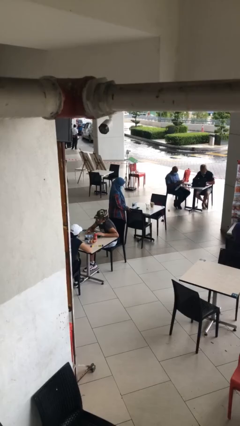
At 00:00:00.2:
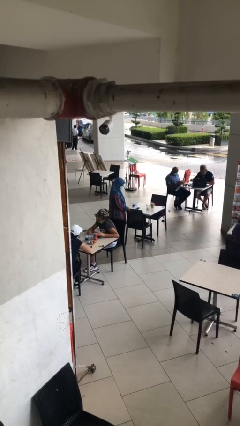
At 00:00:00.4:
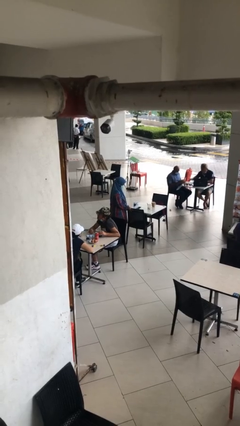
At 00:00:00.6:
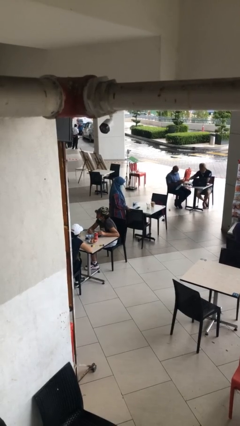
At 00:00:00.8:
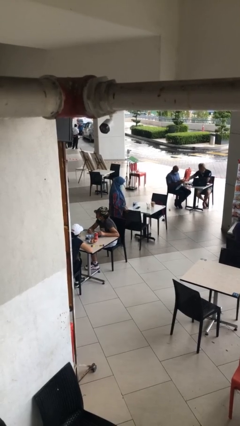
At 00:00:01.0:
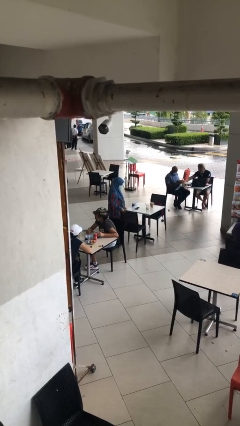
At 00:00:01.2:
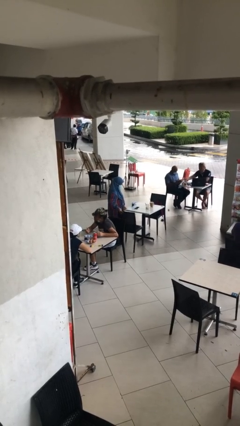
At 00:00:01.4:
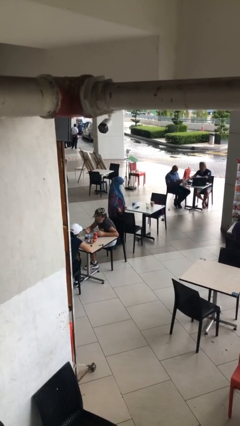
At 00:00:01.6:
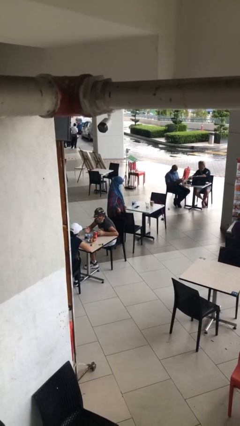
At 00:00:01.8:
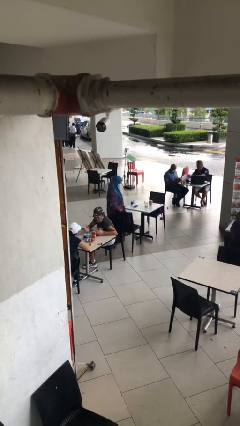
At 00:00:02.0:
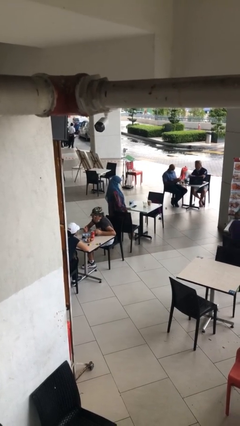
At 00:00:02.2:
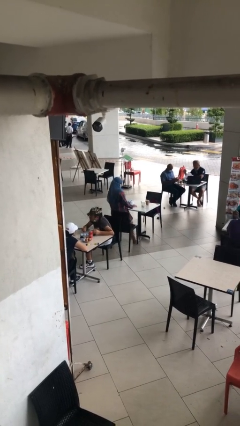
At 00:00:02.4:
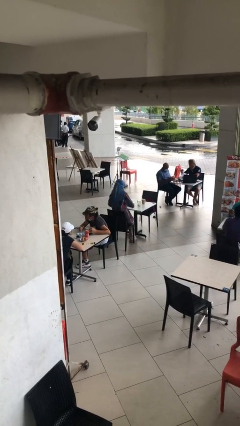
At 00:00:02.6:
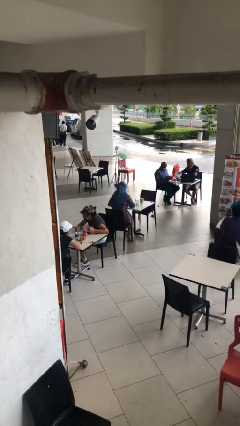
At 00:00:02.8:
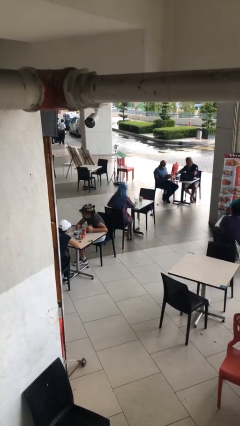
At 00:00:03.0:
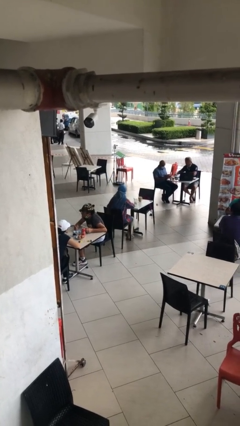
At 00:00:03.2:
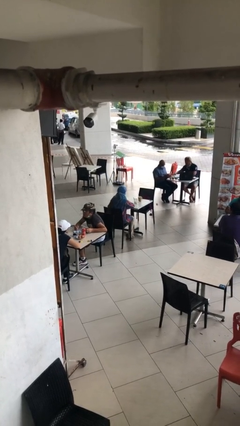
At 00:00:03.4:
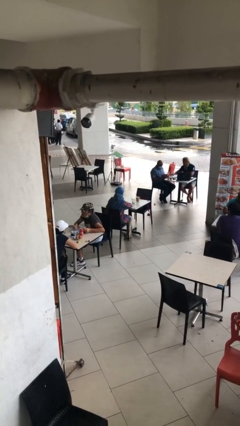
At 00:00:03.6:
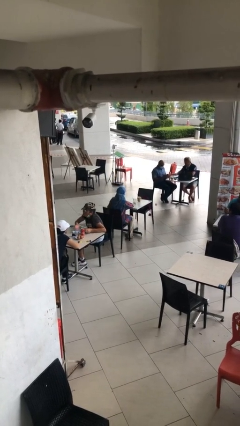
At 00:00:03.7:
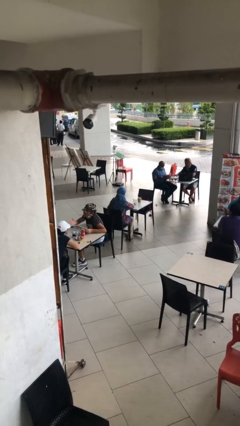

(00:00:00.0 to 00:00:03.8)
person sits down

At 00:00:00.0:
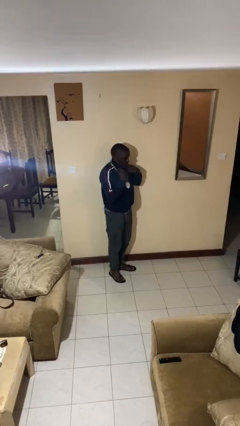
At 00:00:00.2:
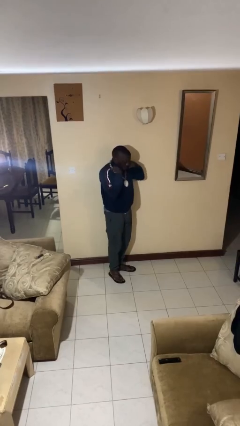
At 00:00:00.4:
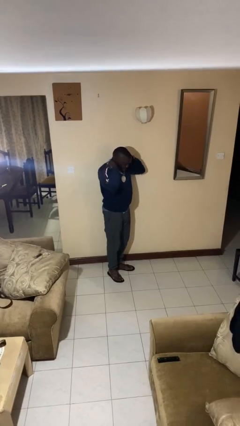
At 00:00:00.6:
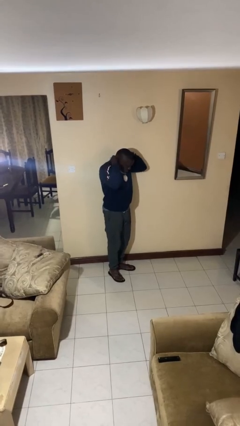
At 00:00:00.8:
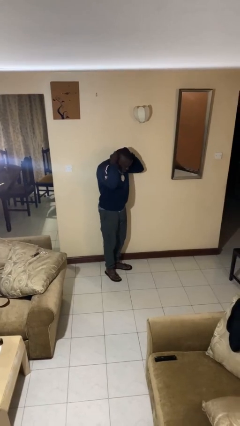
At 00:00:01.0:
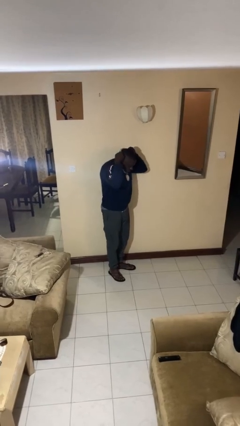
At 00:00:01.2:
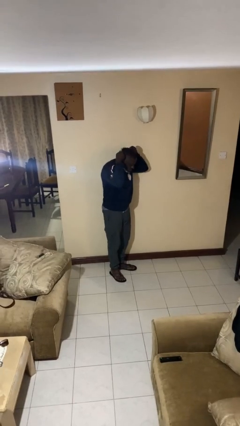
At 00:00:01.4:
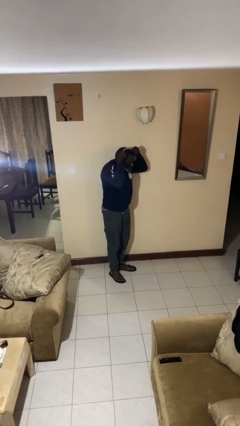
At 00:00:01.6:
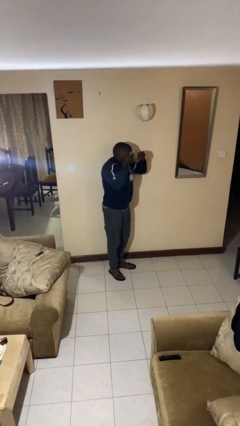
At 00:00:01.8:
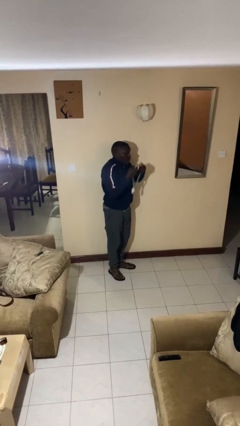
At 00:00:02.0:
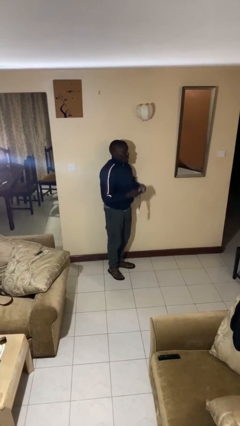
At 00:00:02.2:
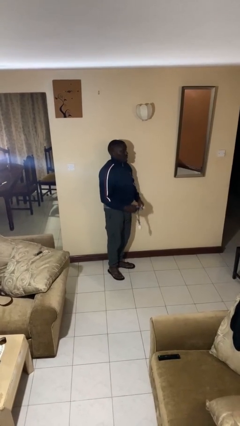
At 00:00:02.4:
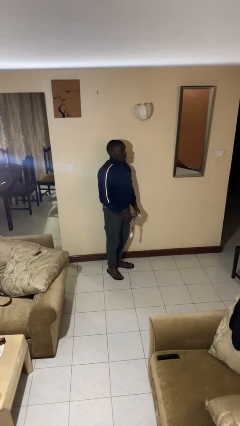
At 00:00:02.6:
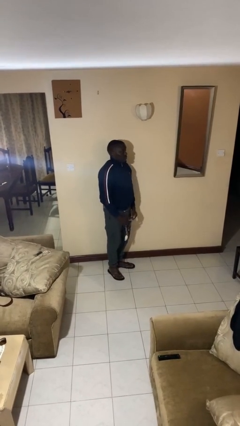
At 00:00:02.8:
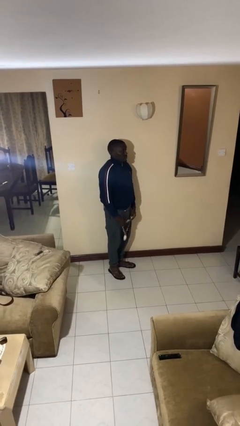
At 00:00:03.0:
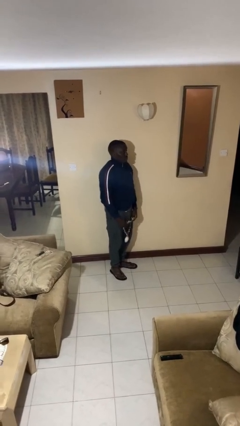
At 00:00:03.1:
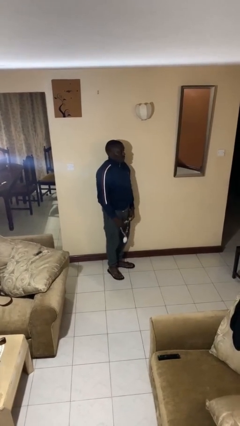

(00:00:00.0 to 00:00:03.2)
person takes off necklace

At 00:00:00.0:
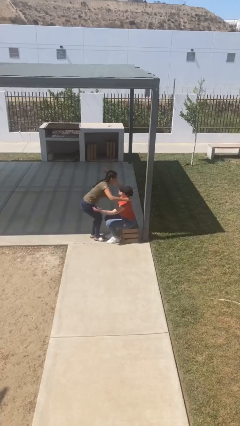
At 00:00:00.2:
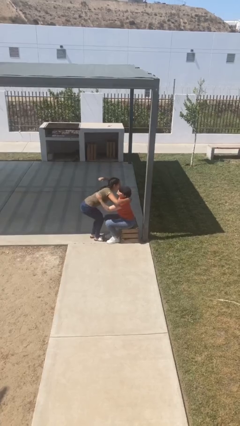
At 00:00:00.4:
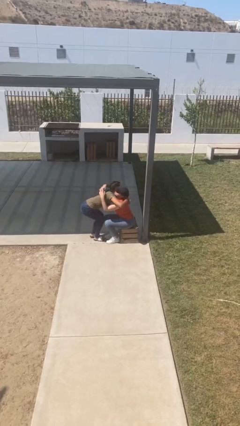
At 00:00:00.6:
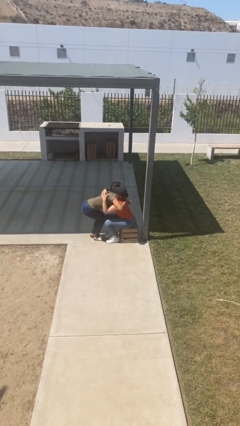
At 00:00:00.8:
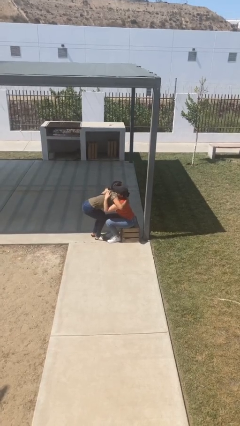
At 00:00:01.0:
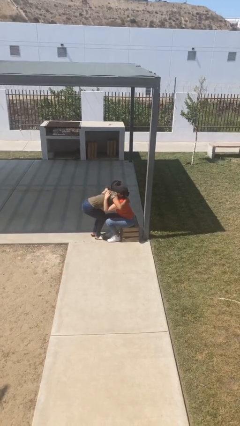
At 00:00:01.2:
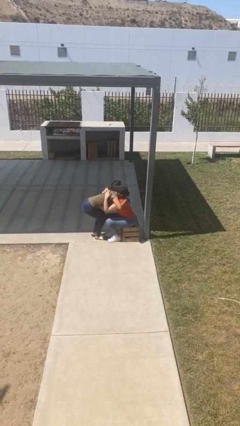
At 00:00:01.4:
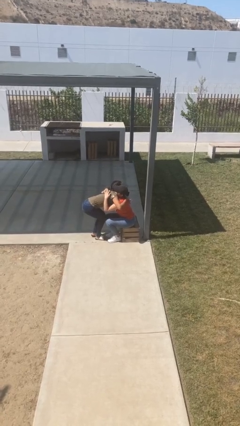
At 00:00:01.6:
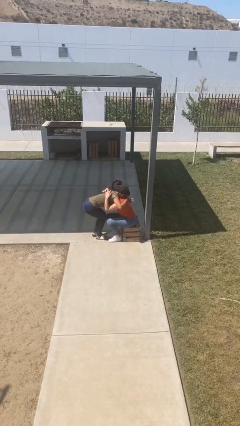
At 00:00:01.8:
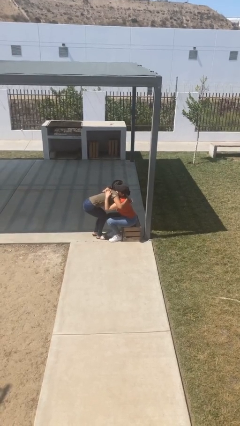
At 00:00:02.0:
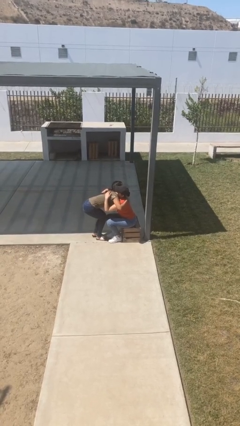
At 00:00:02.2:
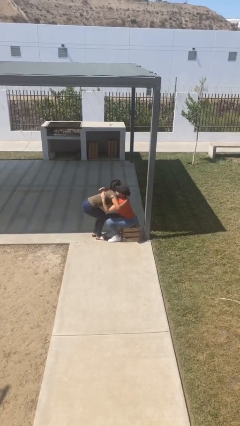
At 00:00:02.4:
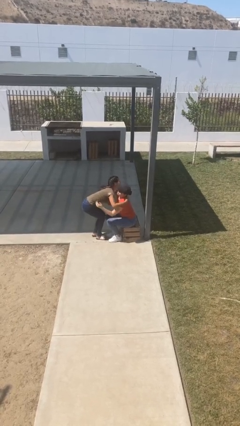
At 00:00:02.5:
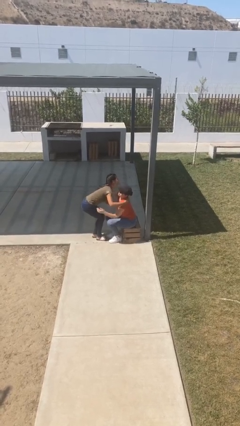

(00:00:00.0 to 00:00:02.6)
person embraces person

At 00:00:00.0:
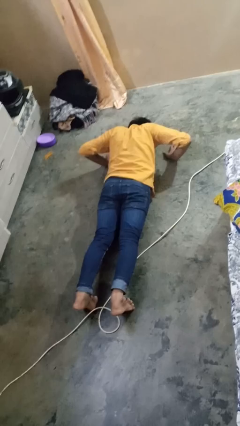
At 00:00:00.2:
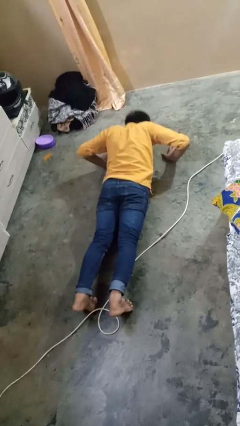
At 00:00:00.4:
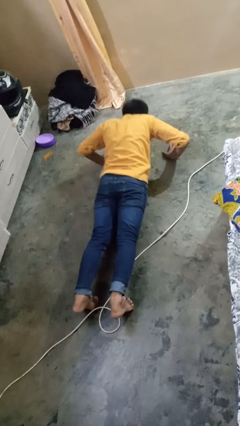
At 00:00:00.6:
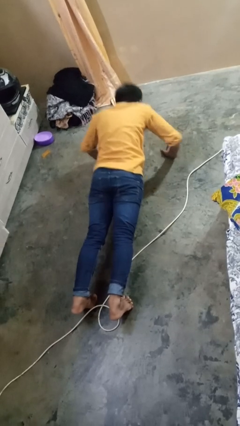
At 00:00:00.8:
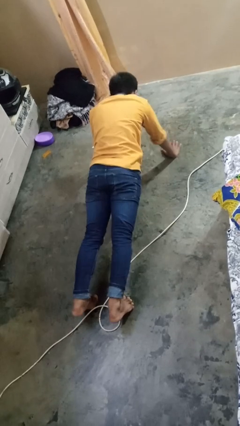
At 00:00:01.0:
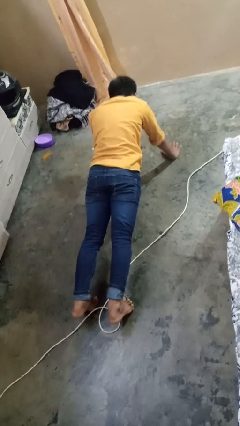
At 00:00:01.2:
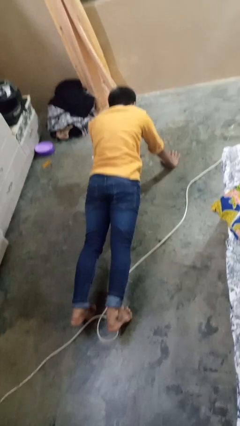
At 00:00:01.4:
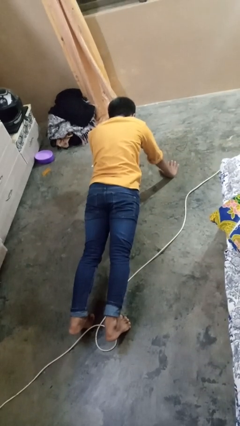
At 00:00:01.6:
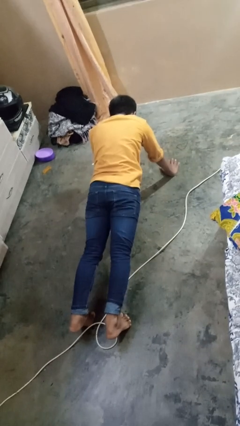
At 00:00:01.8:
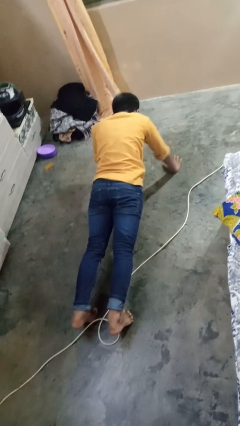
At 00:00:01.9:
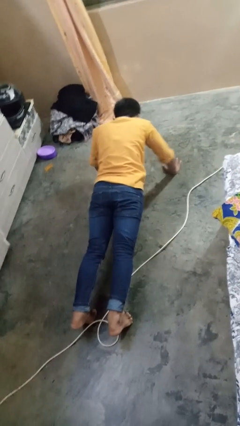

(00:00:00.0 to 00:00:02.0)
person exercises with pushup

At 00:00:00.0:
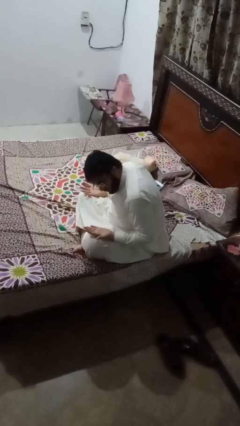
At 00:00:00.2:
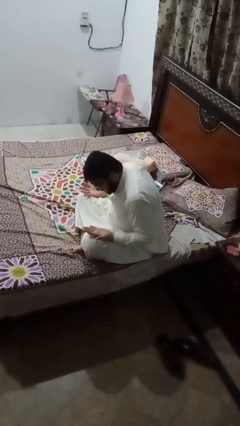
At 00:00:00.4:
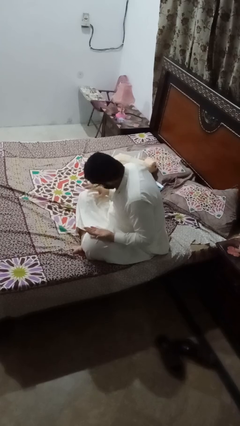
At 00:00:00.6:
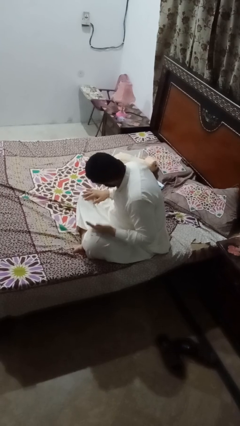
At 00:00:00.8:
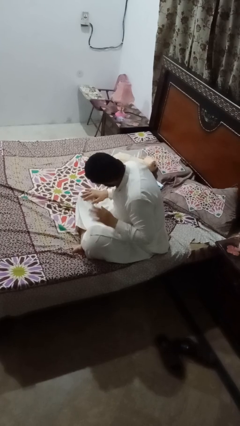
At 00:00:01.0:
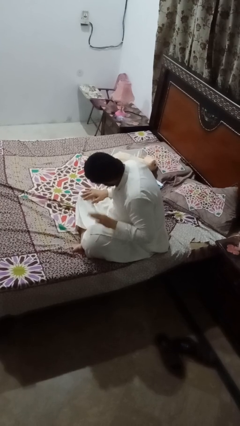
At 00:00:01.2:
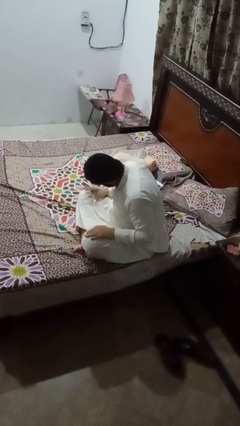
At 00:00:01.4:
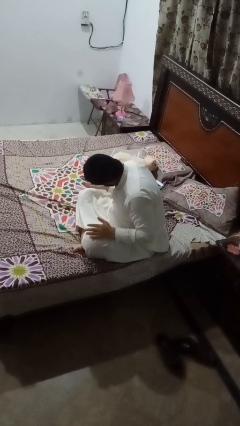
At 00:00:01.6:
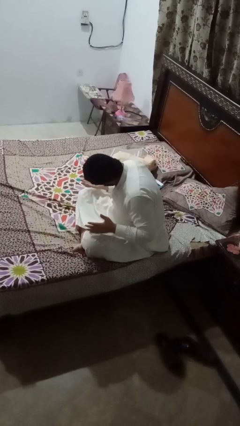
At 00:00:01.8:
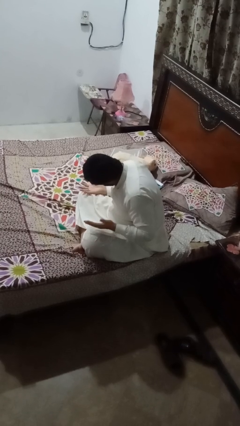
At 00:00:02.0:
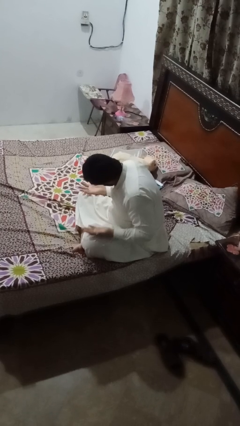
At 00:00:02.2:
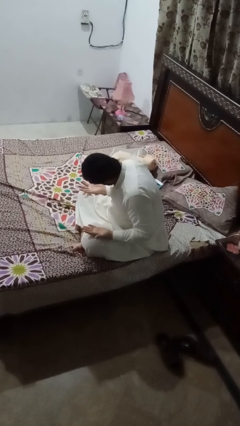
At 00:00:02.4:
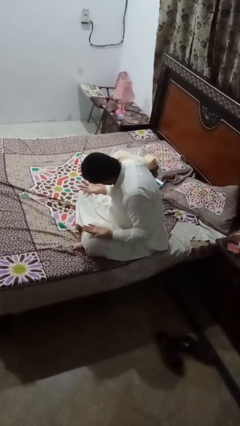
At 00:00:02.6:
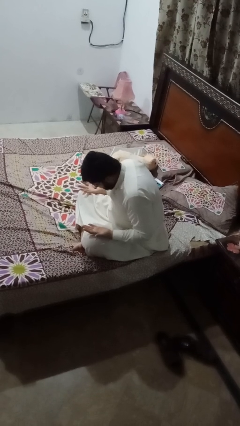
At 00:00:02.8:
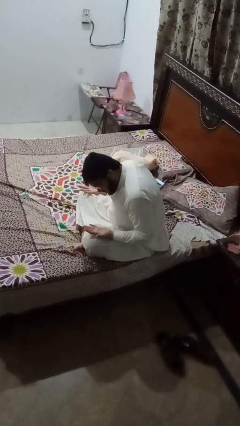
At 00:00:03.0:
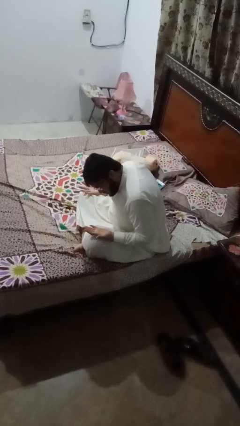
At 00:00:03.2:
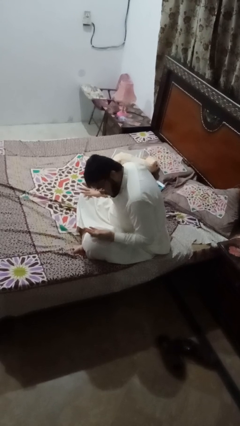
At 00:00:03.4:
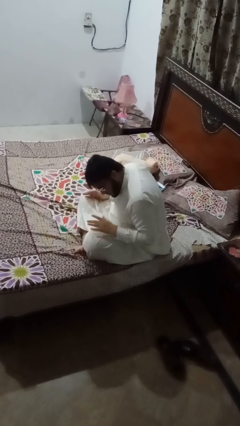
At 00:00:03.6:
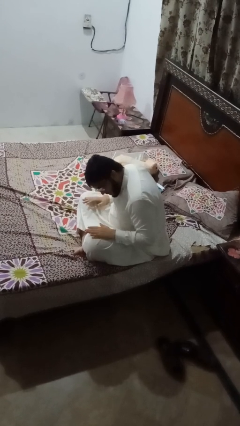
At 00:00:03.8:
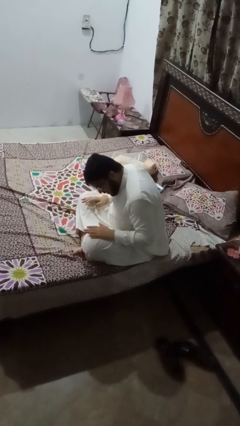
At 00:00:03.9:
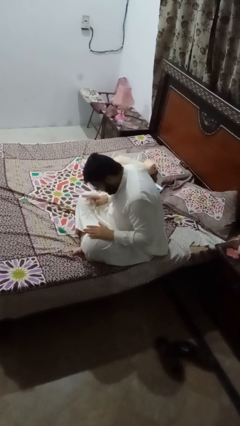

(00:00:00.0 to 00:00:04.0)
person looks at hands in lap

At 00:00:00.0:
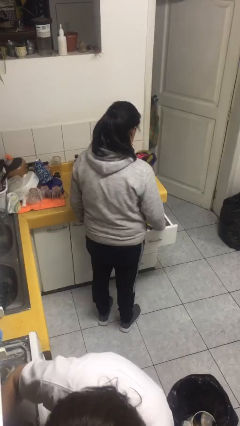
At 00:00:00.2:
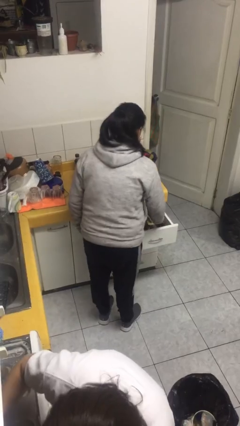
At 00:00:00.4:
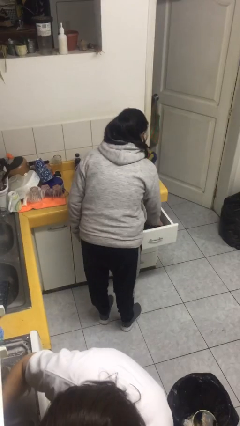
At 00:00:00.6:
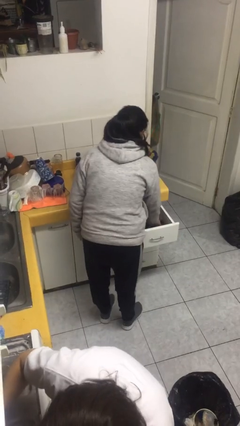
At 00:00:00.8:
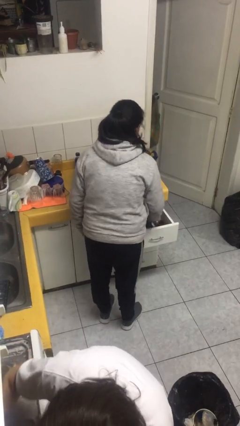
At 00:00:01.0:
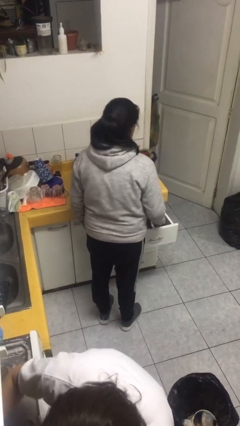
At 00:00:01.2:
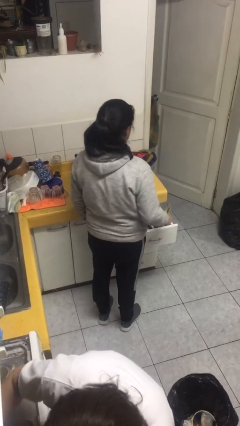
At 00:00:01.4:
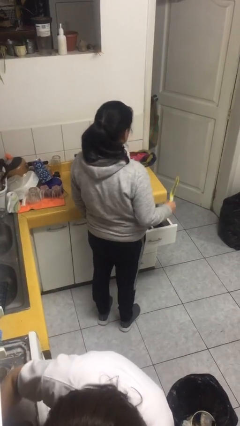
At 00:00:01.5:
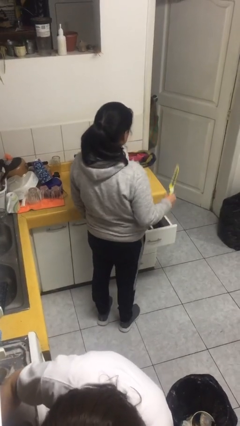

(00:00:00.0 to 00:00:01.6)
person takes object from kitchen drawer
